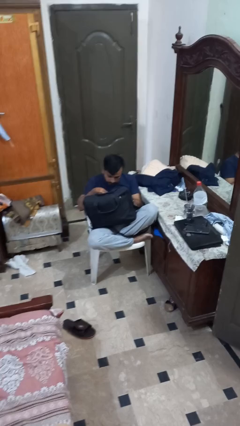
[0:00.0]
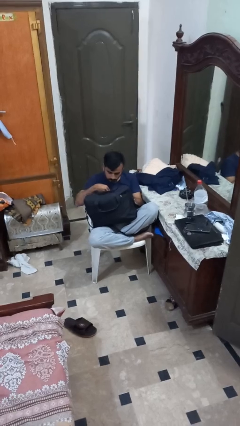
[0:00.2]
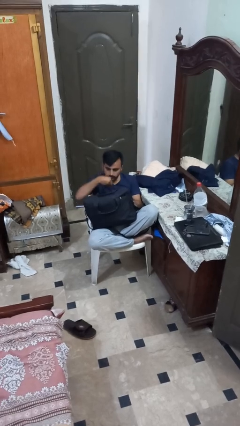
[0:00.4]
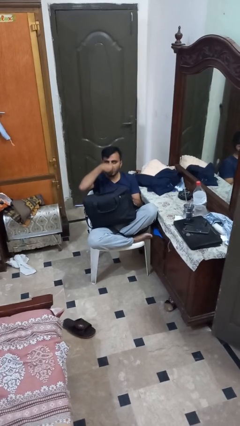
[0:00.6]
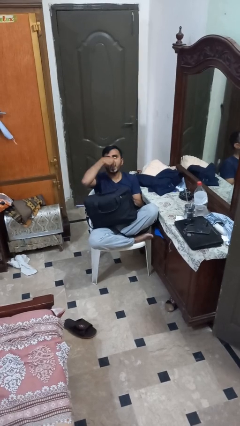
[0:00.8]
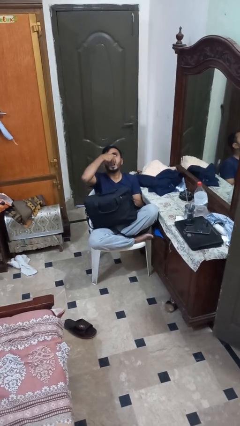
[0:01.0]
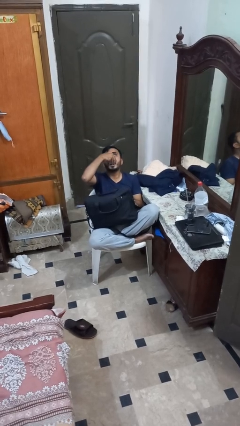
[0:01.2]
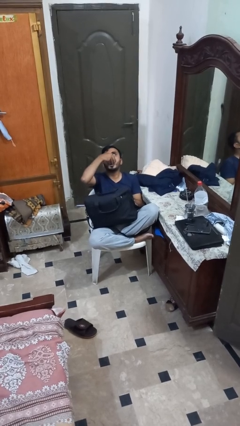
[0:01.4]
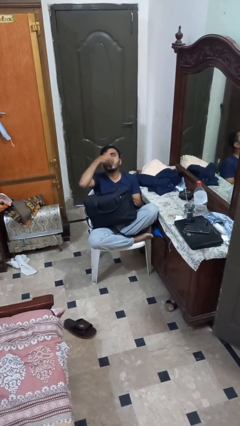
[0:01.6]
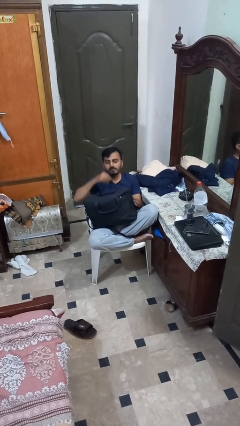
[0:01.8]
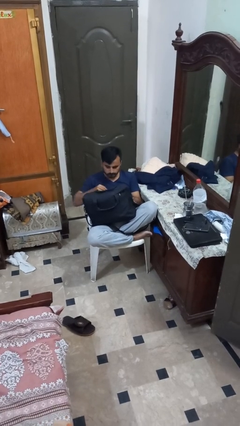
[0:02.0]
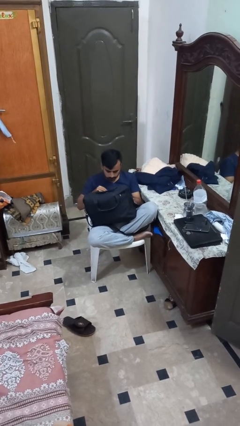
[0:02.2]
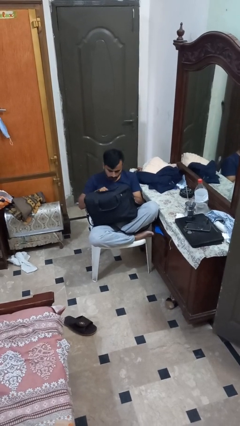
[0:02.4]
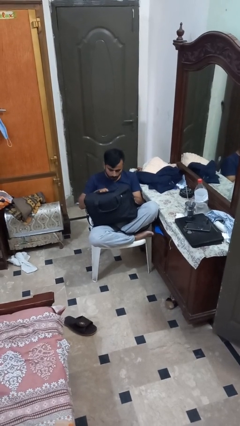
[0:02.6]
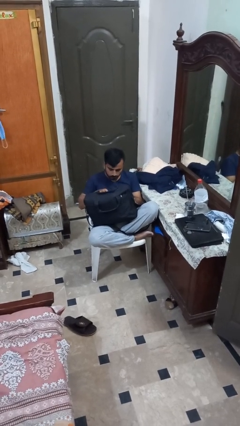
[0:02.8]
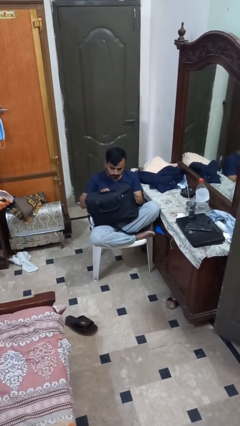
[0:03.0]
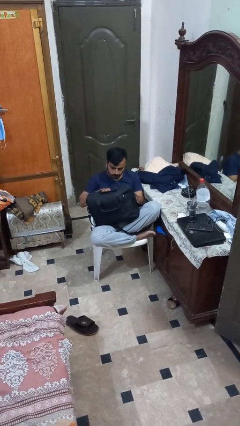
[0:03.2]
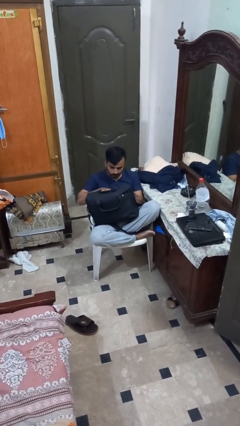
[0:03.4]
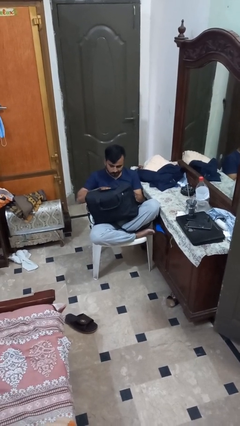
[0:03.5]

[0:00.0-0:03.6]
person eats snack from bag

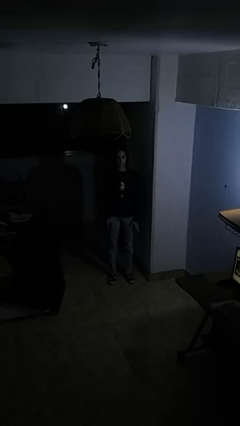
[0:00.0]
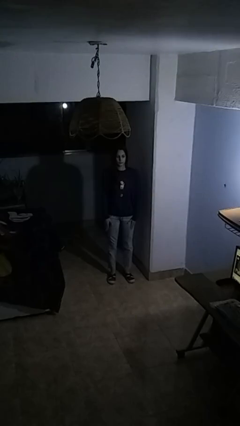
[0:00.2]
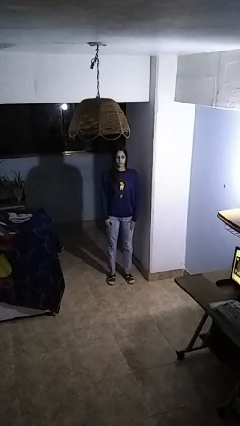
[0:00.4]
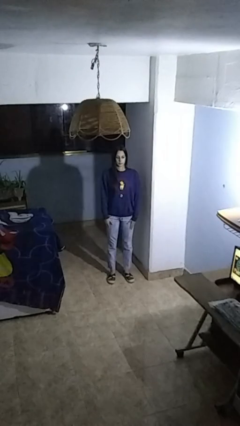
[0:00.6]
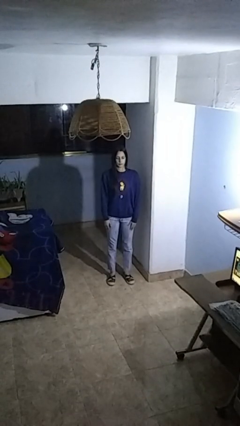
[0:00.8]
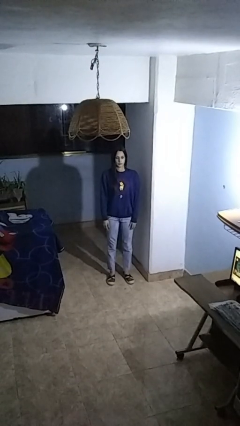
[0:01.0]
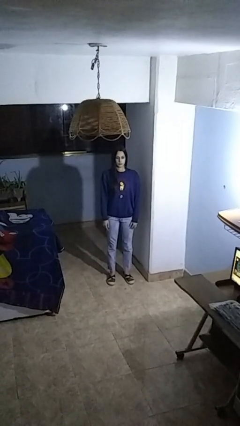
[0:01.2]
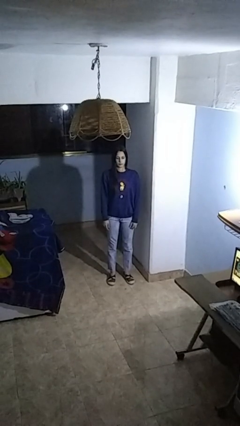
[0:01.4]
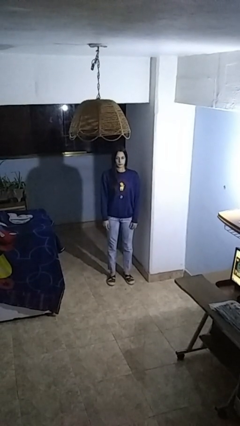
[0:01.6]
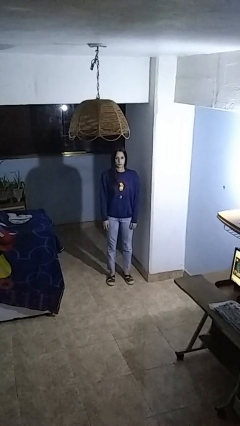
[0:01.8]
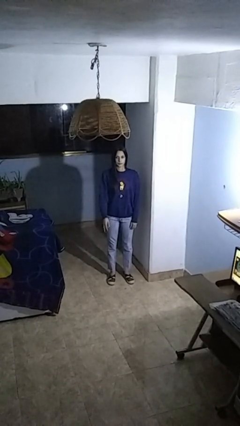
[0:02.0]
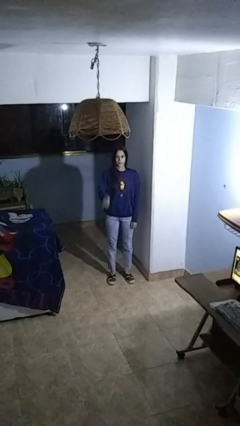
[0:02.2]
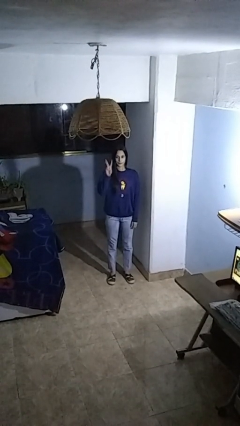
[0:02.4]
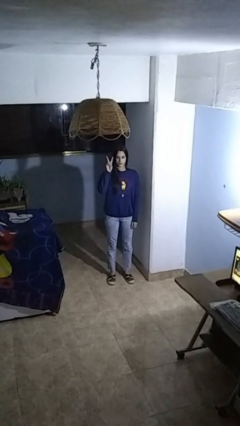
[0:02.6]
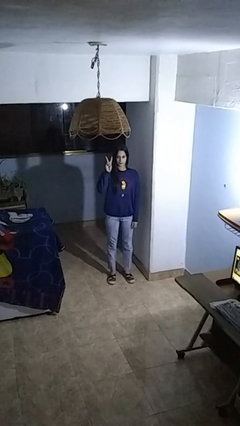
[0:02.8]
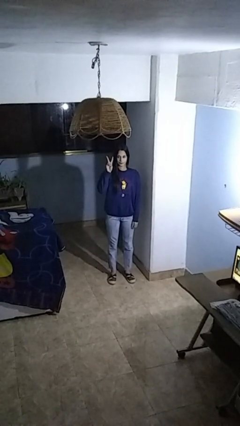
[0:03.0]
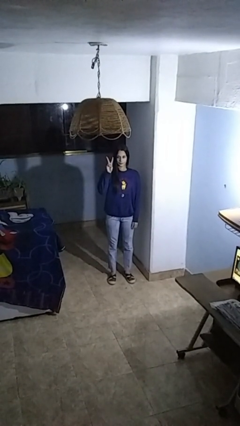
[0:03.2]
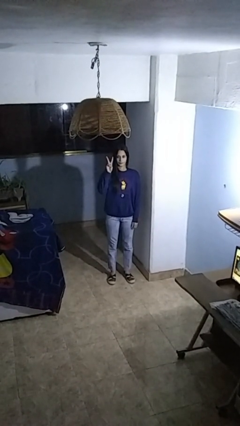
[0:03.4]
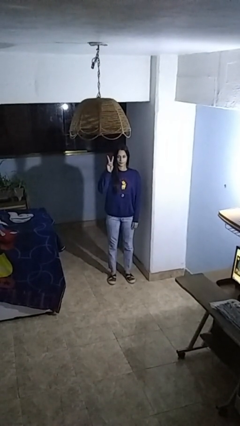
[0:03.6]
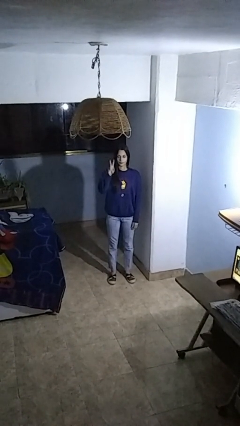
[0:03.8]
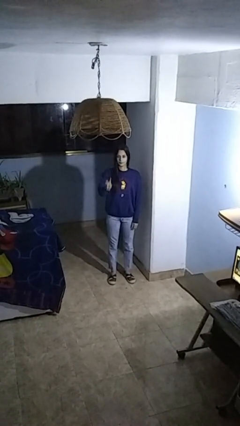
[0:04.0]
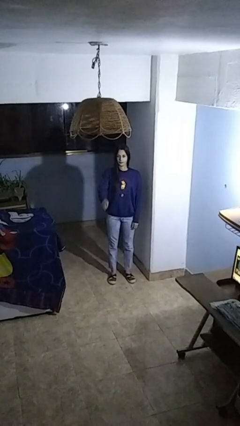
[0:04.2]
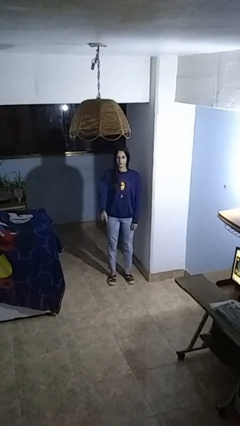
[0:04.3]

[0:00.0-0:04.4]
person gestures peace

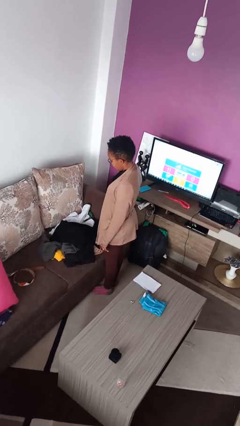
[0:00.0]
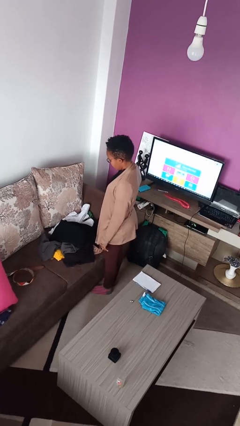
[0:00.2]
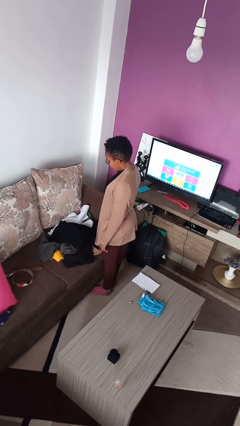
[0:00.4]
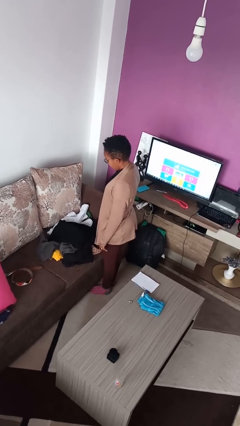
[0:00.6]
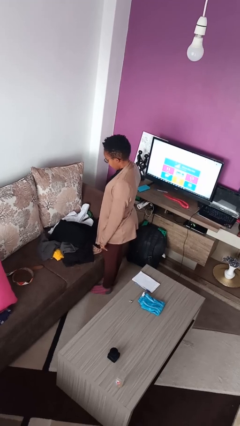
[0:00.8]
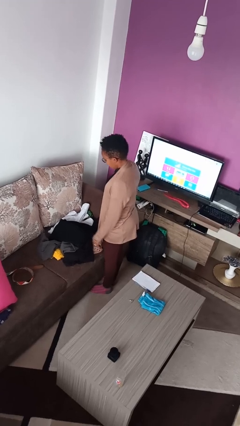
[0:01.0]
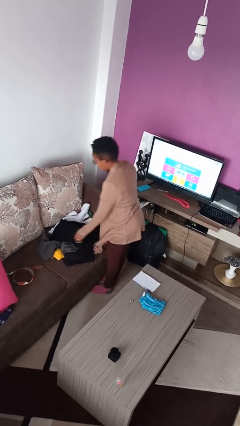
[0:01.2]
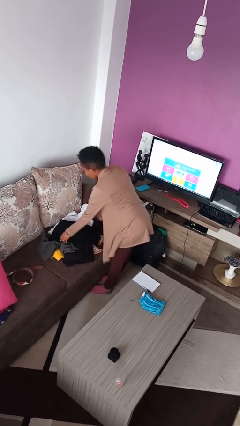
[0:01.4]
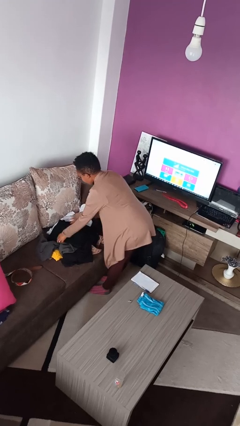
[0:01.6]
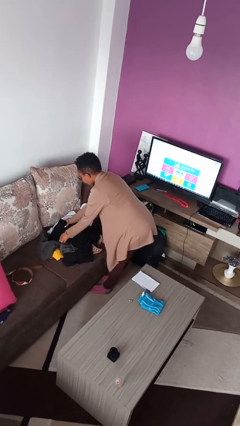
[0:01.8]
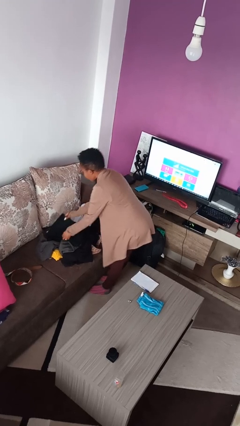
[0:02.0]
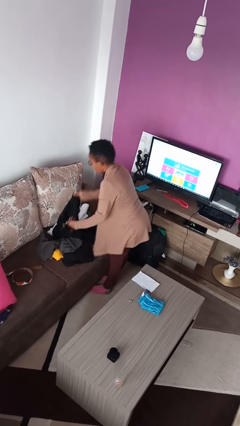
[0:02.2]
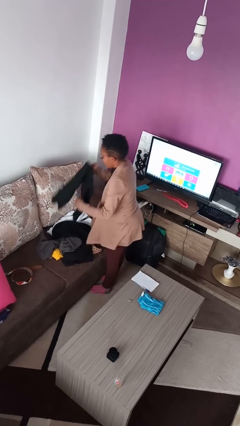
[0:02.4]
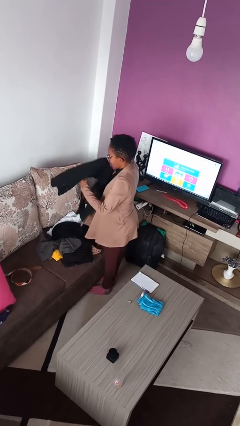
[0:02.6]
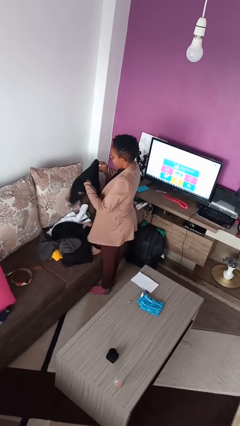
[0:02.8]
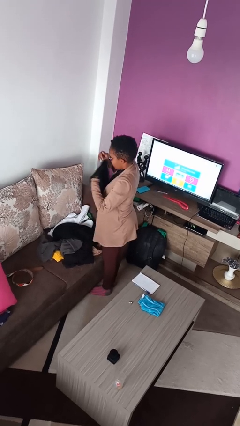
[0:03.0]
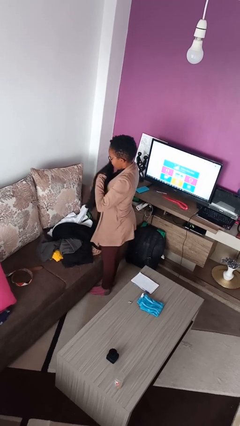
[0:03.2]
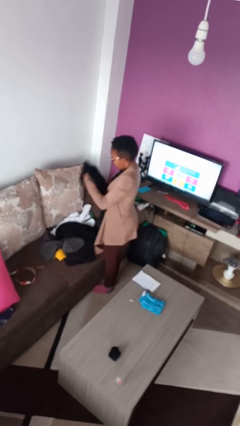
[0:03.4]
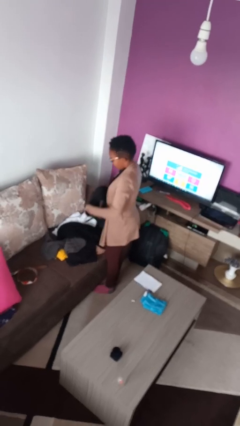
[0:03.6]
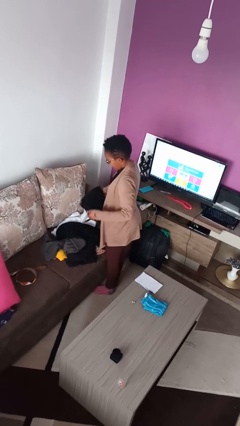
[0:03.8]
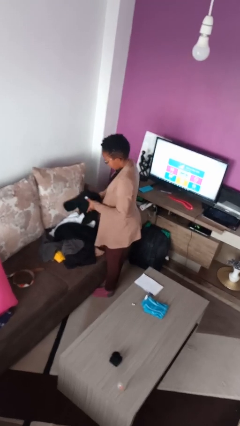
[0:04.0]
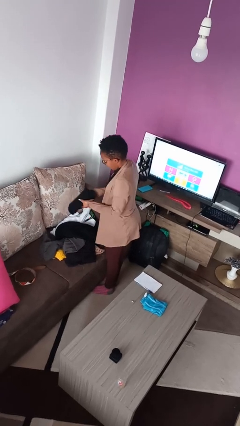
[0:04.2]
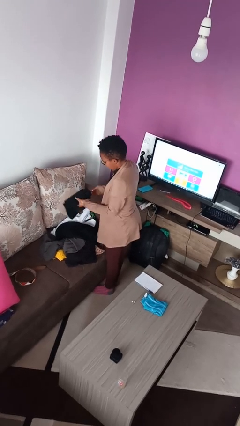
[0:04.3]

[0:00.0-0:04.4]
person folds pants

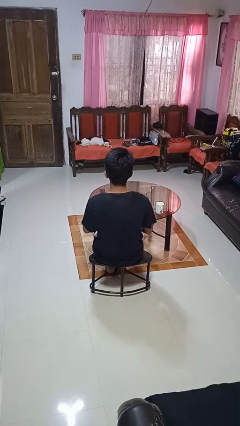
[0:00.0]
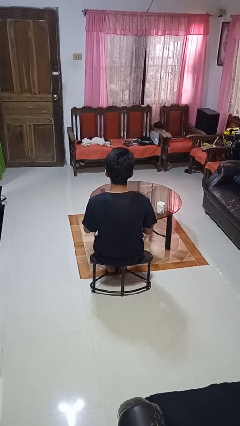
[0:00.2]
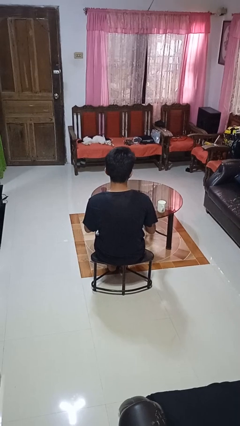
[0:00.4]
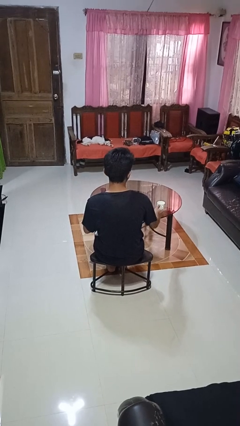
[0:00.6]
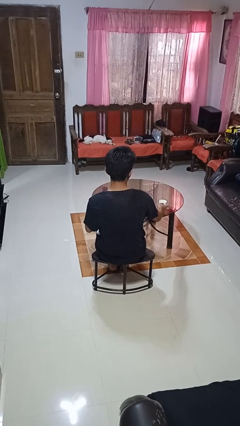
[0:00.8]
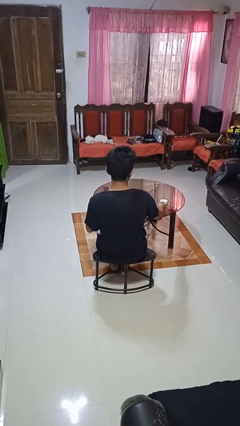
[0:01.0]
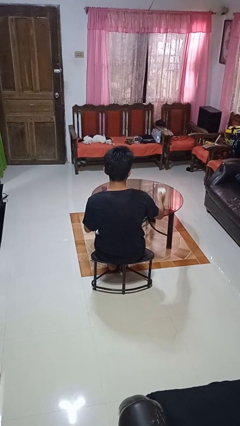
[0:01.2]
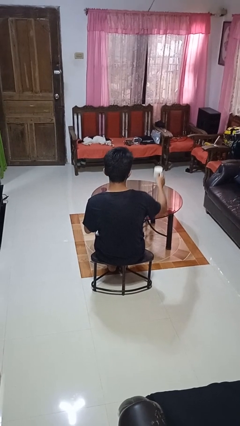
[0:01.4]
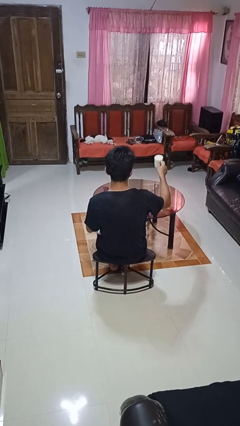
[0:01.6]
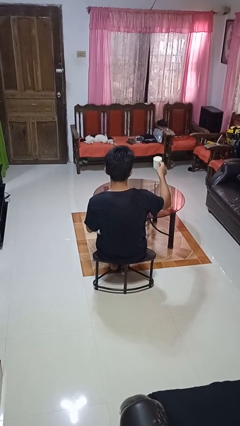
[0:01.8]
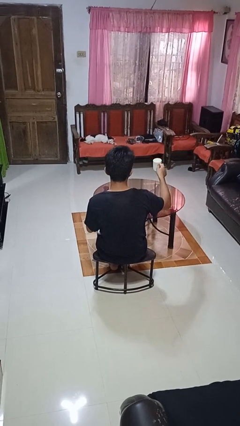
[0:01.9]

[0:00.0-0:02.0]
person picks up object from table

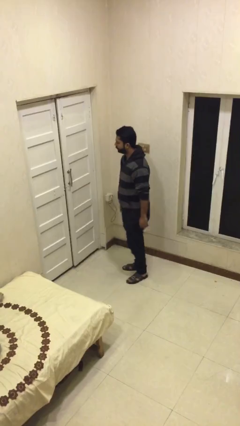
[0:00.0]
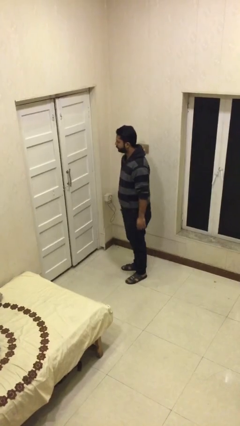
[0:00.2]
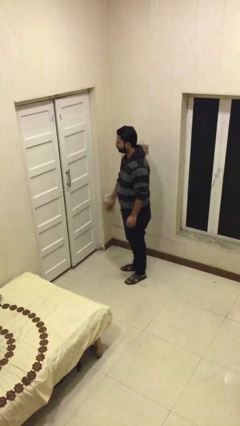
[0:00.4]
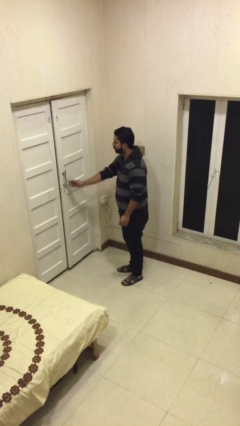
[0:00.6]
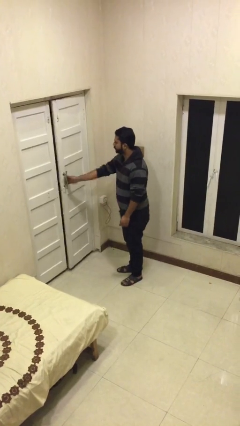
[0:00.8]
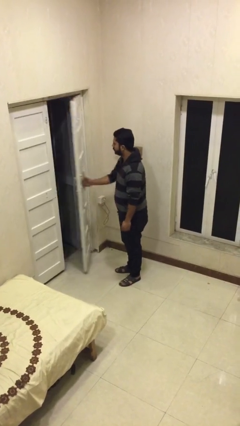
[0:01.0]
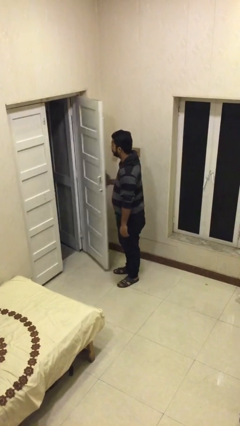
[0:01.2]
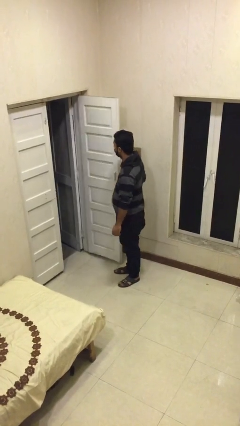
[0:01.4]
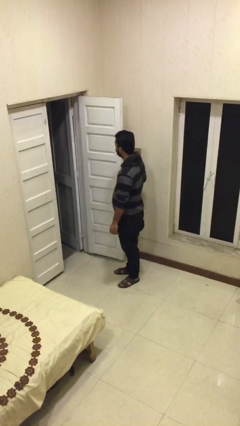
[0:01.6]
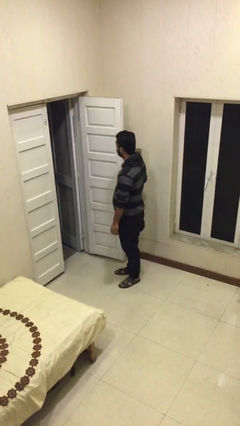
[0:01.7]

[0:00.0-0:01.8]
person opens facility door

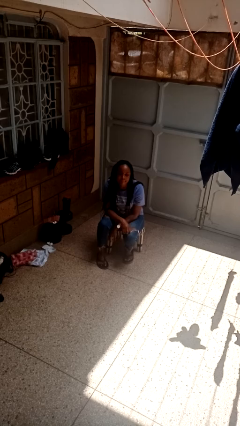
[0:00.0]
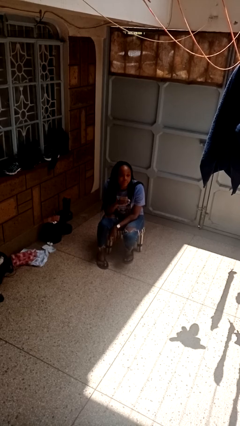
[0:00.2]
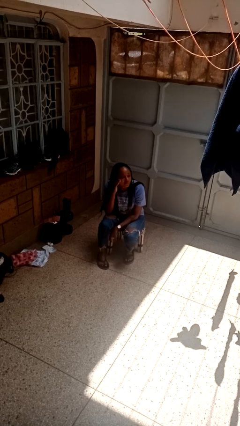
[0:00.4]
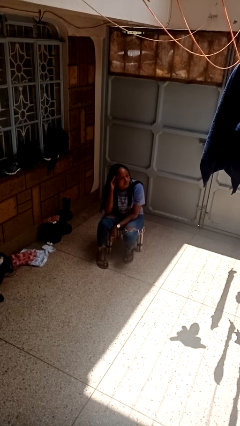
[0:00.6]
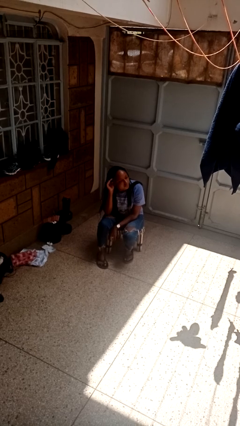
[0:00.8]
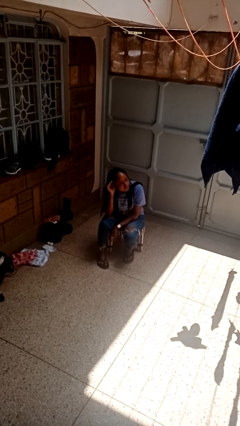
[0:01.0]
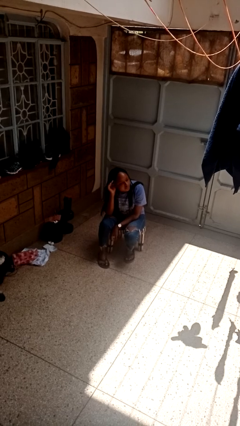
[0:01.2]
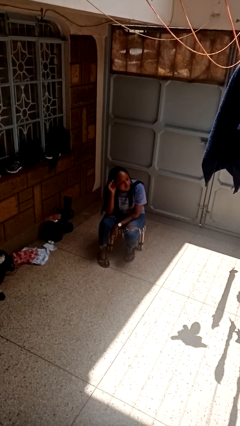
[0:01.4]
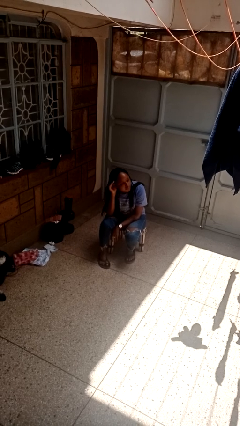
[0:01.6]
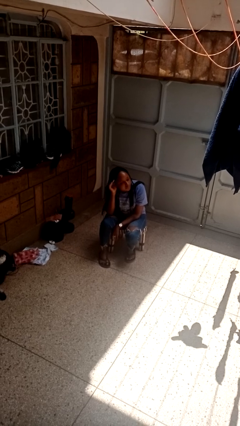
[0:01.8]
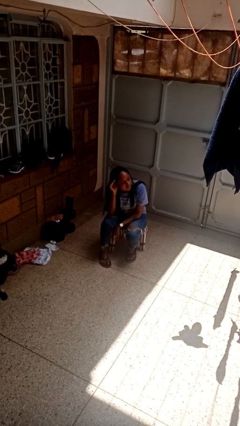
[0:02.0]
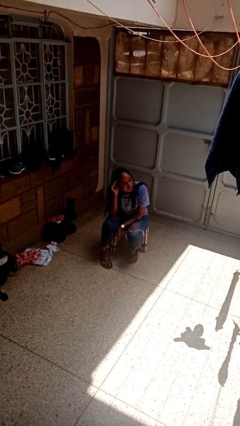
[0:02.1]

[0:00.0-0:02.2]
person gestures listen closely
